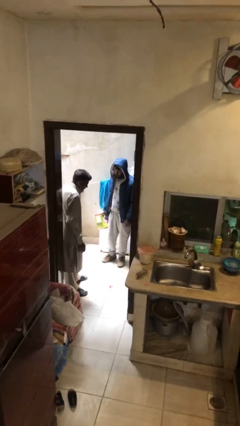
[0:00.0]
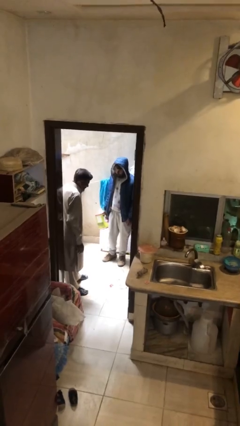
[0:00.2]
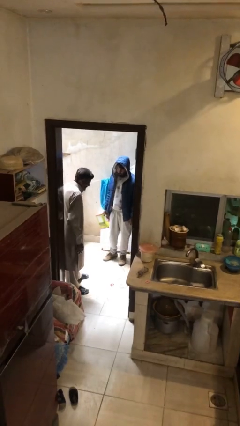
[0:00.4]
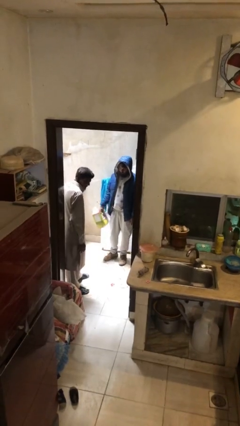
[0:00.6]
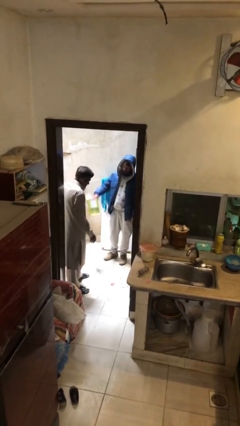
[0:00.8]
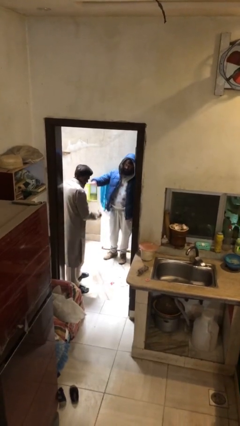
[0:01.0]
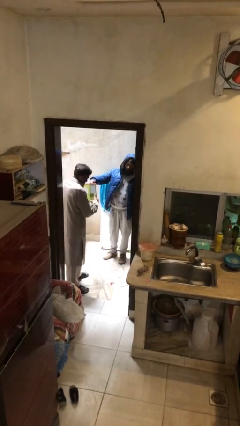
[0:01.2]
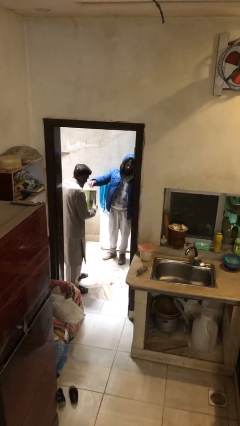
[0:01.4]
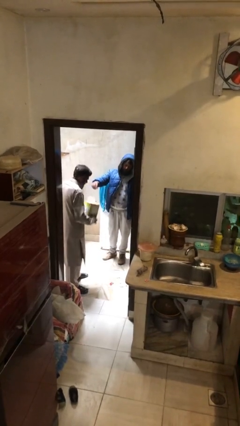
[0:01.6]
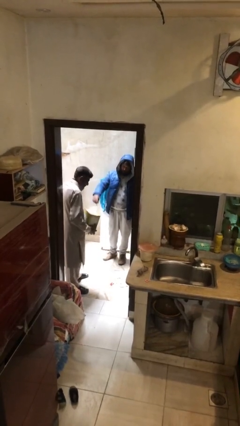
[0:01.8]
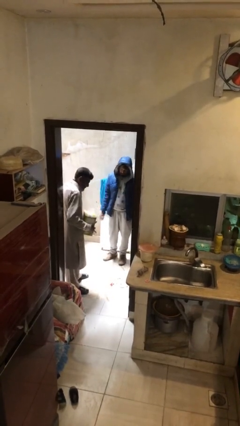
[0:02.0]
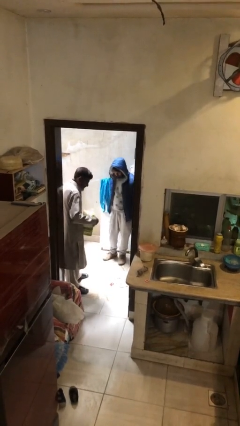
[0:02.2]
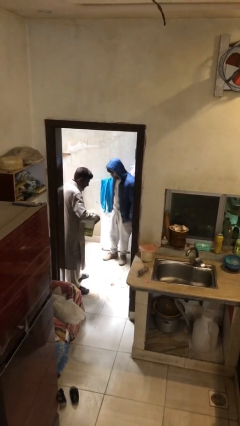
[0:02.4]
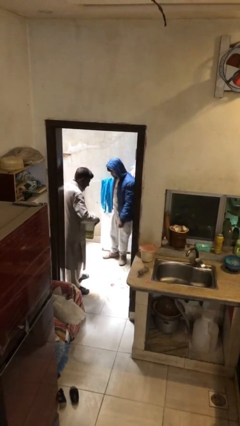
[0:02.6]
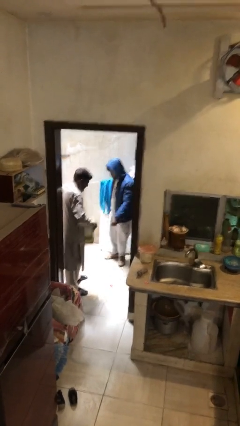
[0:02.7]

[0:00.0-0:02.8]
person transfers object to person

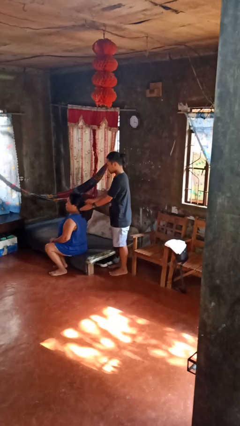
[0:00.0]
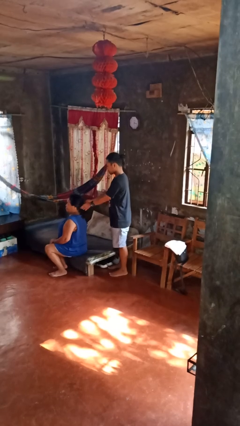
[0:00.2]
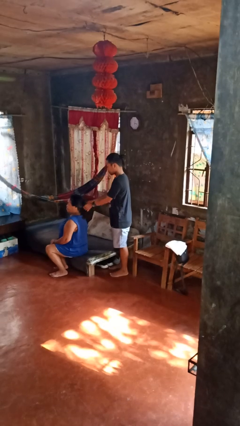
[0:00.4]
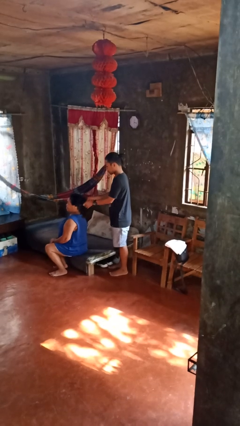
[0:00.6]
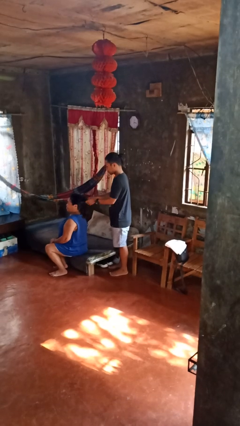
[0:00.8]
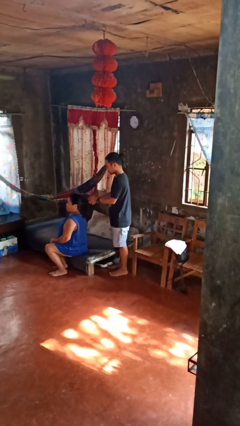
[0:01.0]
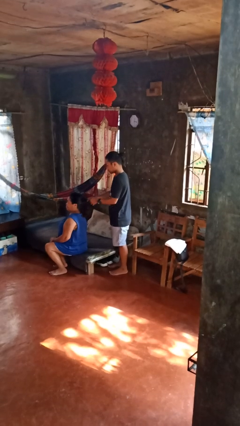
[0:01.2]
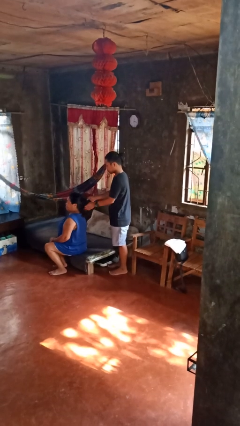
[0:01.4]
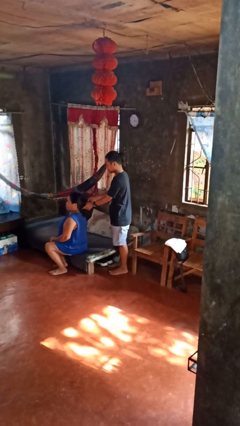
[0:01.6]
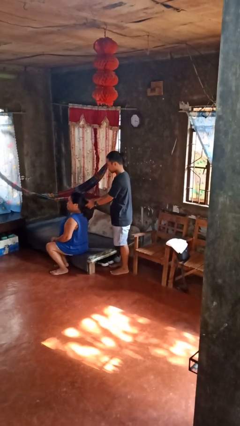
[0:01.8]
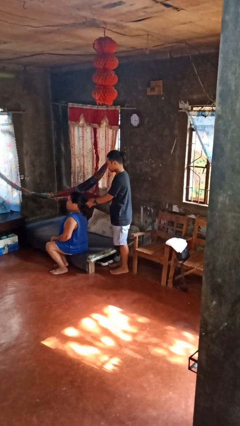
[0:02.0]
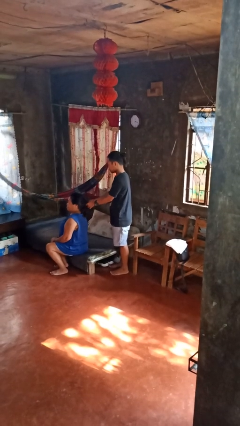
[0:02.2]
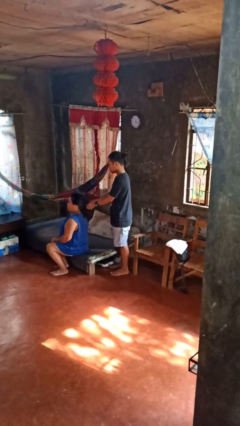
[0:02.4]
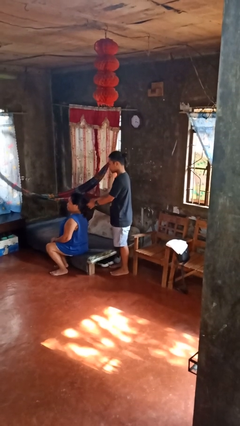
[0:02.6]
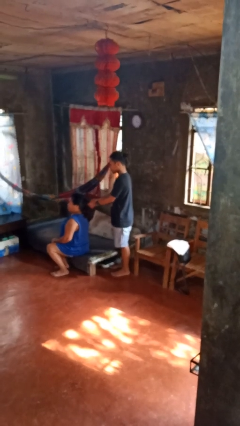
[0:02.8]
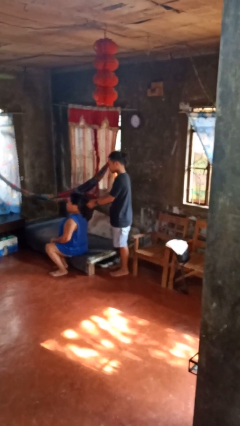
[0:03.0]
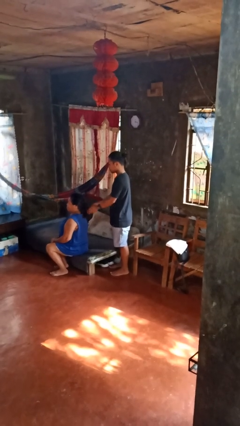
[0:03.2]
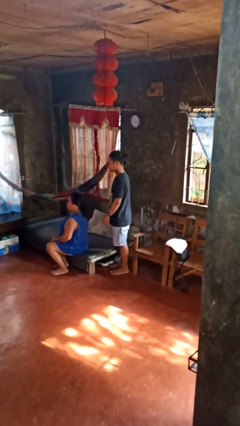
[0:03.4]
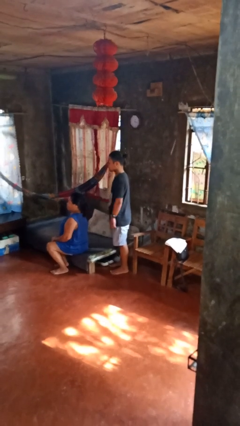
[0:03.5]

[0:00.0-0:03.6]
person braids hair of person

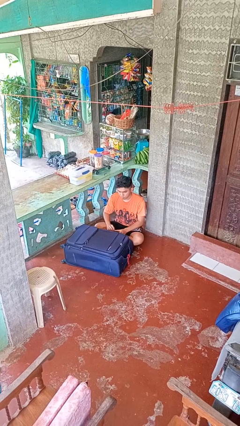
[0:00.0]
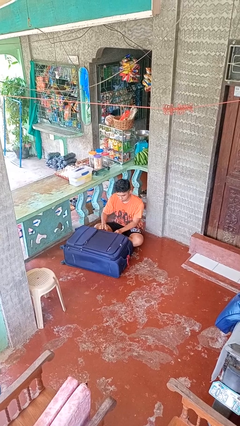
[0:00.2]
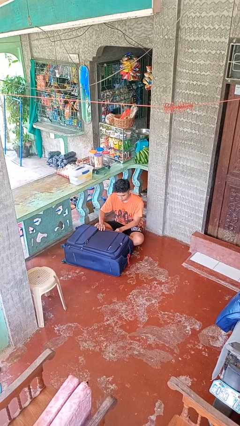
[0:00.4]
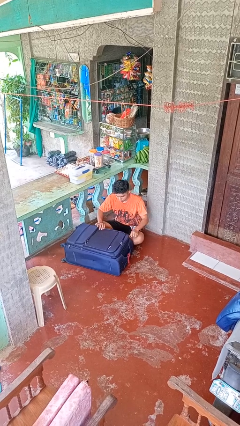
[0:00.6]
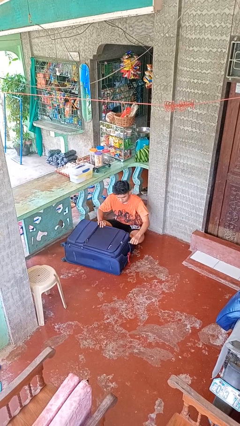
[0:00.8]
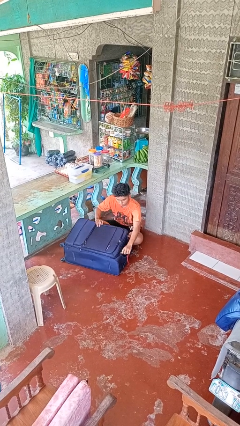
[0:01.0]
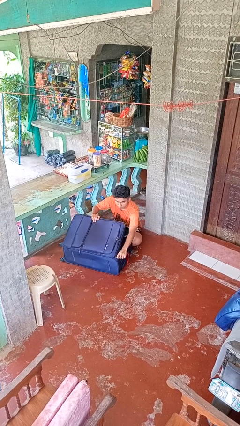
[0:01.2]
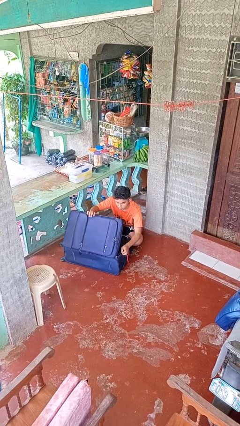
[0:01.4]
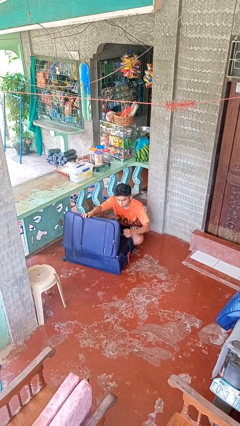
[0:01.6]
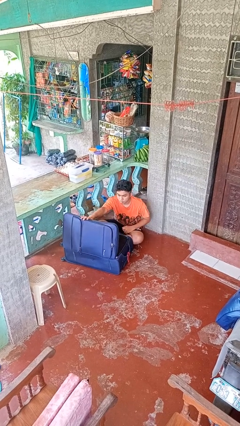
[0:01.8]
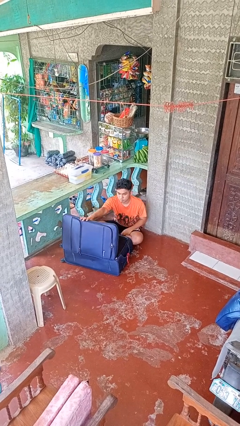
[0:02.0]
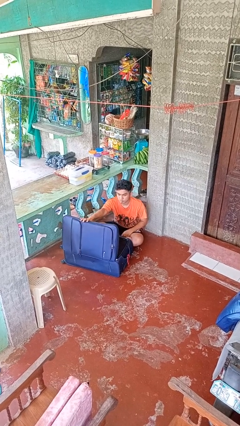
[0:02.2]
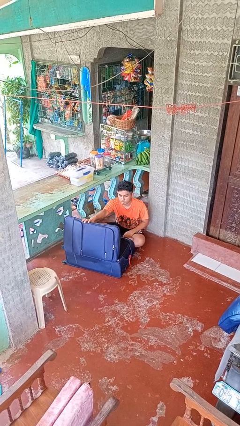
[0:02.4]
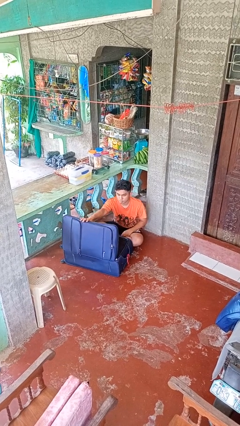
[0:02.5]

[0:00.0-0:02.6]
person opens suitcase

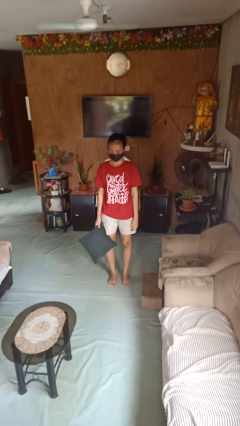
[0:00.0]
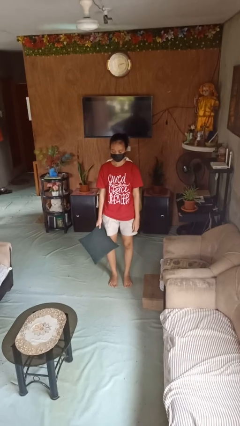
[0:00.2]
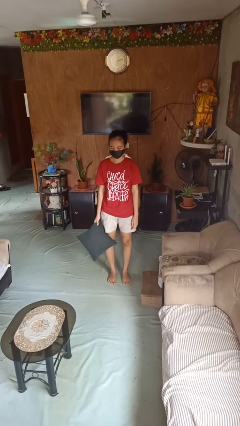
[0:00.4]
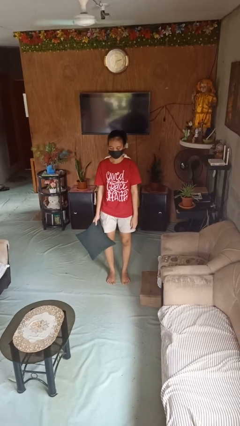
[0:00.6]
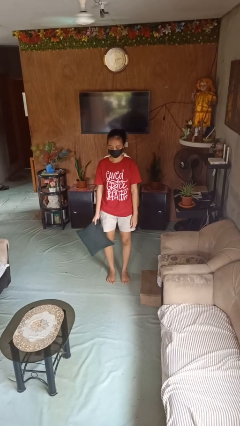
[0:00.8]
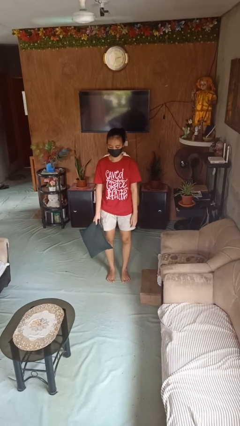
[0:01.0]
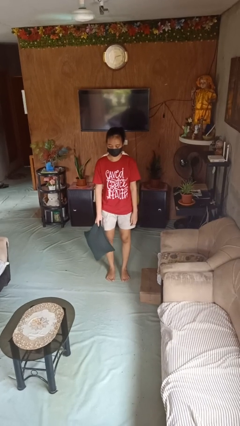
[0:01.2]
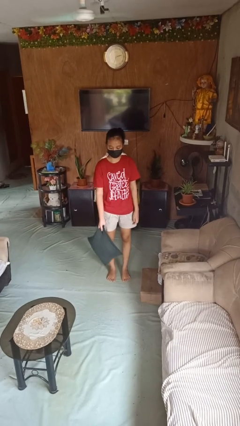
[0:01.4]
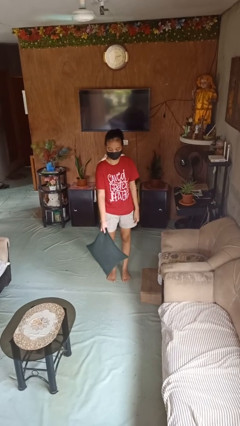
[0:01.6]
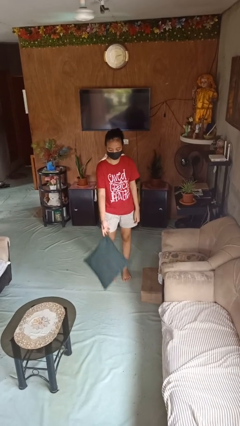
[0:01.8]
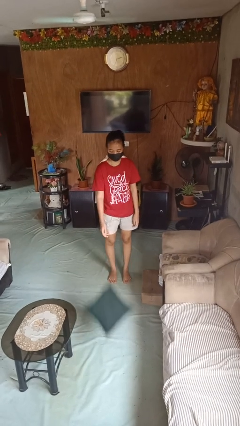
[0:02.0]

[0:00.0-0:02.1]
person throws object to ground

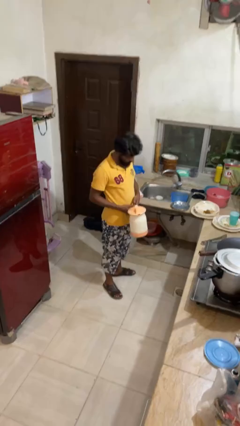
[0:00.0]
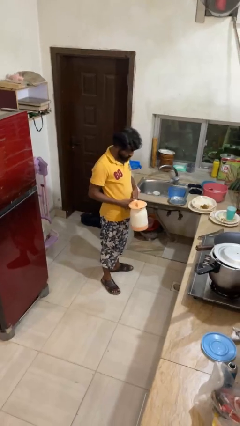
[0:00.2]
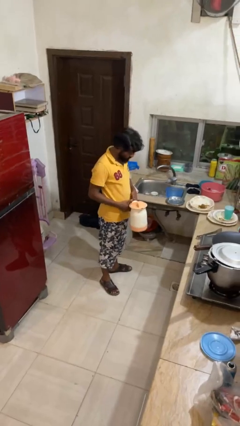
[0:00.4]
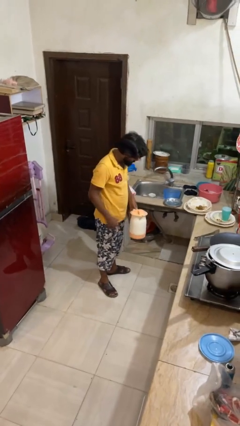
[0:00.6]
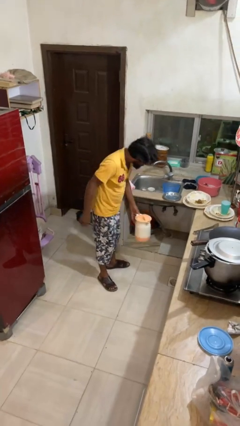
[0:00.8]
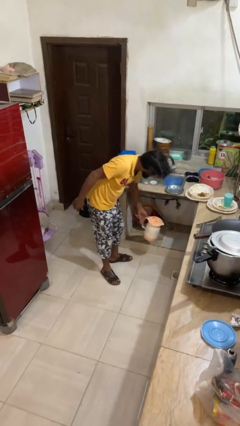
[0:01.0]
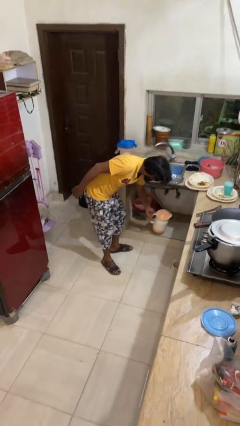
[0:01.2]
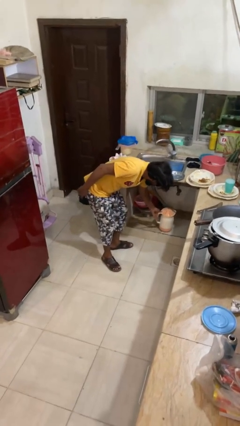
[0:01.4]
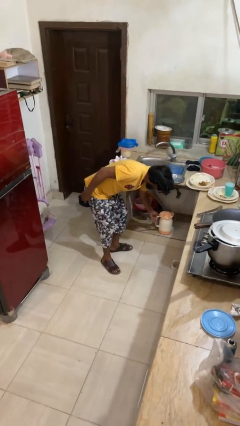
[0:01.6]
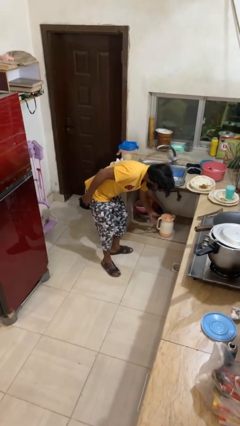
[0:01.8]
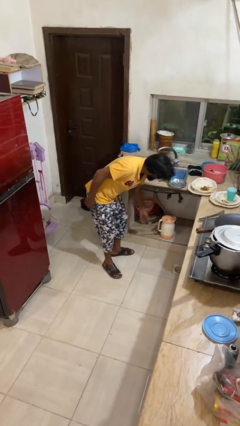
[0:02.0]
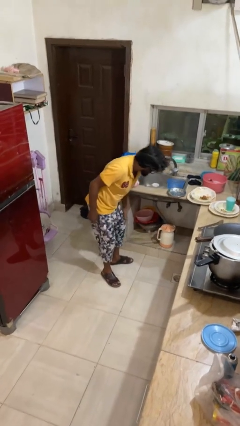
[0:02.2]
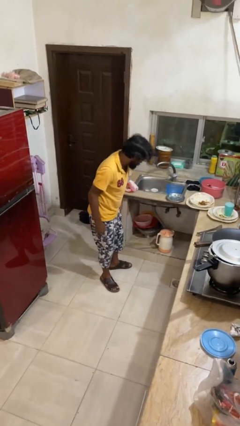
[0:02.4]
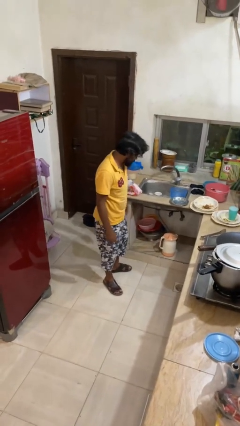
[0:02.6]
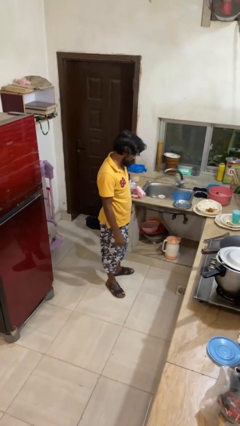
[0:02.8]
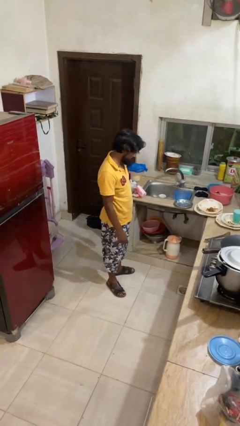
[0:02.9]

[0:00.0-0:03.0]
person puts down object into cabinet

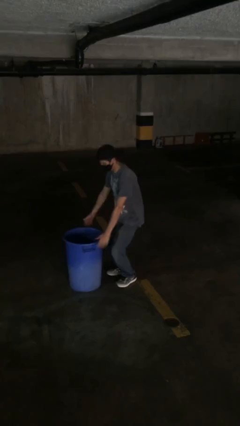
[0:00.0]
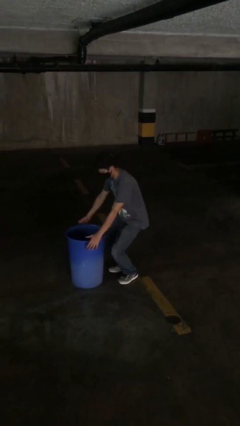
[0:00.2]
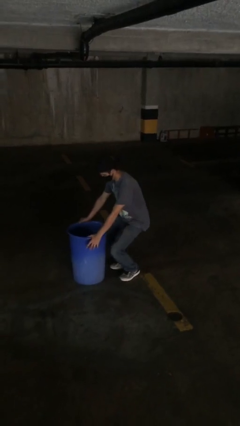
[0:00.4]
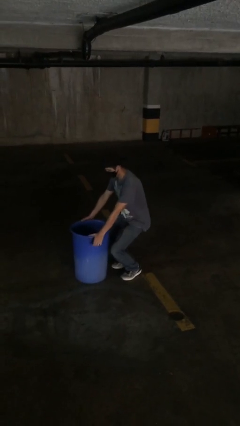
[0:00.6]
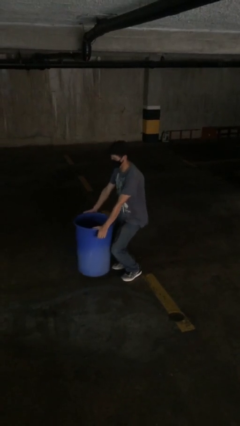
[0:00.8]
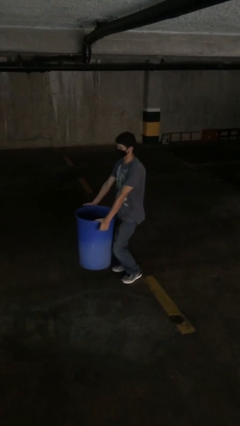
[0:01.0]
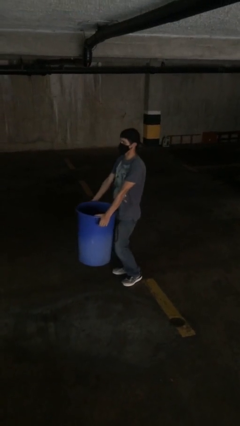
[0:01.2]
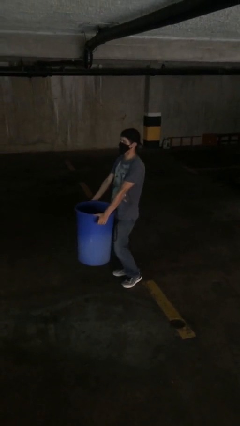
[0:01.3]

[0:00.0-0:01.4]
person picks up object from floor

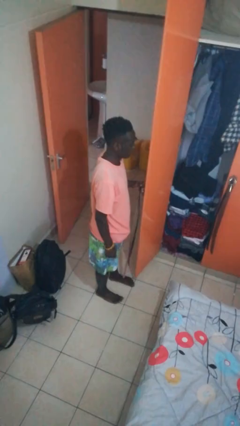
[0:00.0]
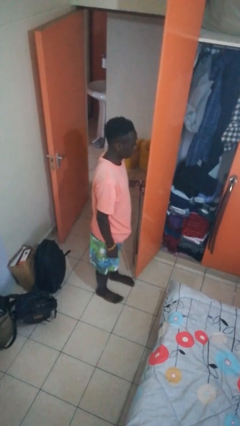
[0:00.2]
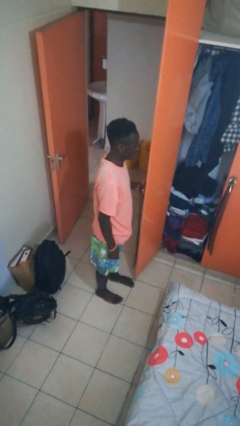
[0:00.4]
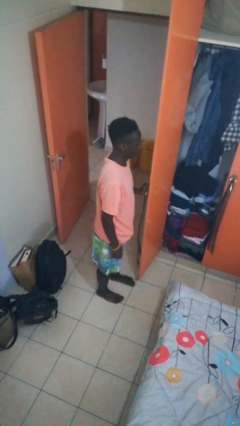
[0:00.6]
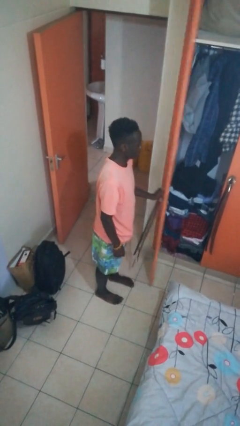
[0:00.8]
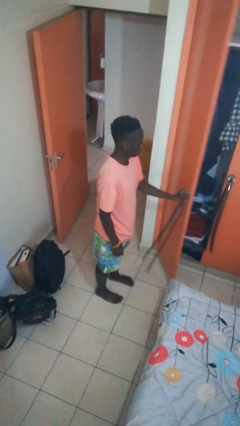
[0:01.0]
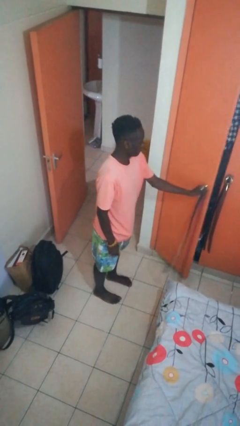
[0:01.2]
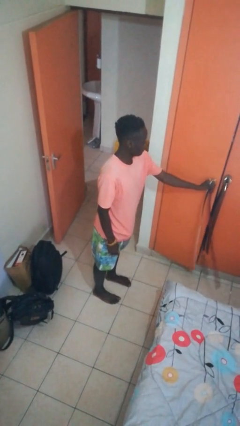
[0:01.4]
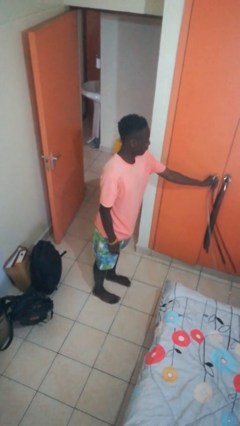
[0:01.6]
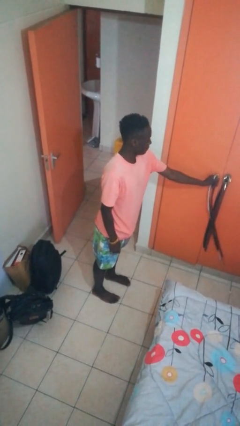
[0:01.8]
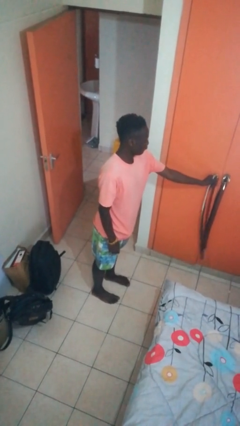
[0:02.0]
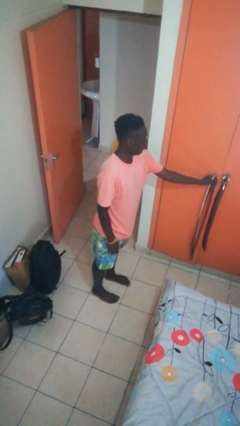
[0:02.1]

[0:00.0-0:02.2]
person closes closet door
